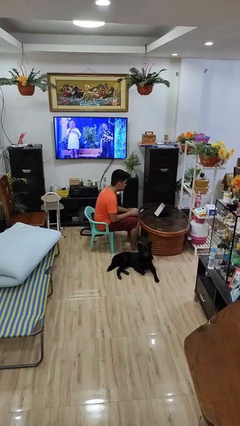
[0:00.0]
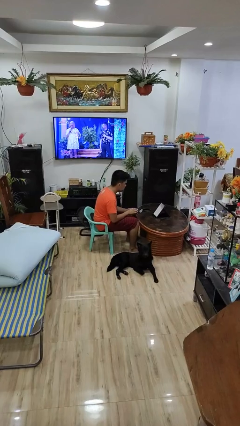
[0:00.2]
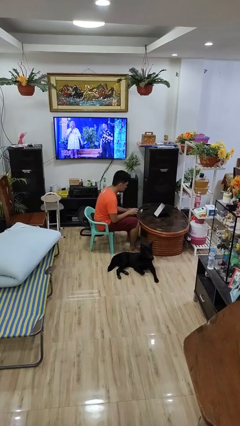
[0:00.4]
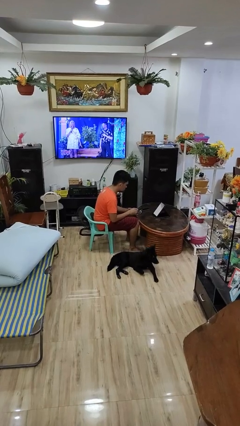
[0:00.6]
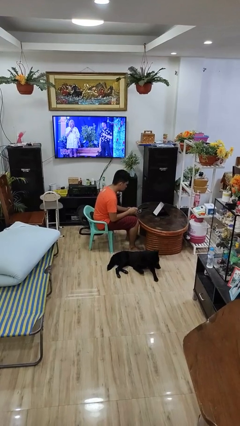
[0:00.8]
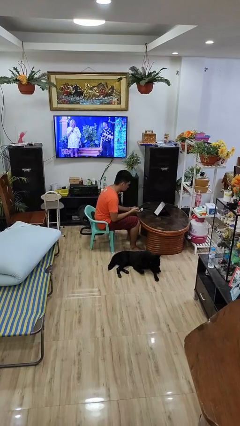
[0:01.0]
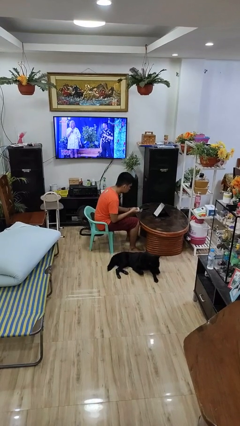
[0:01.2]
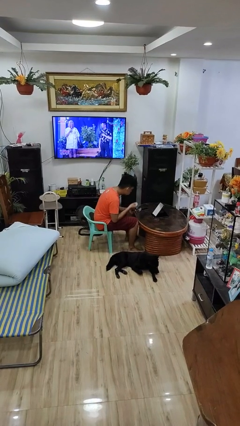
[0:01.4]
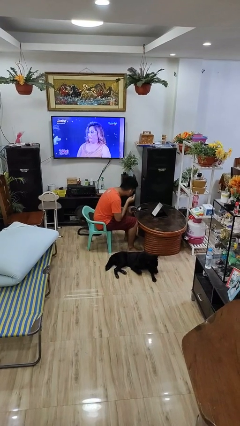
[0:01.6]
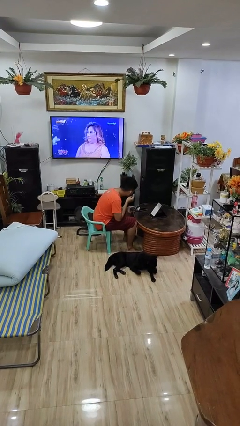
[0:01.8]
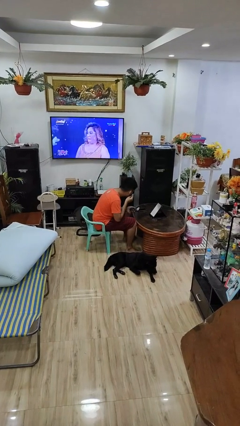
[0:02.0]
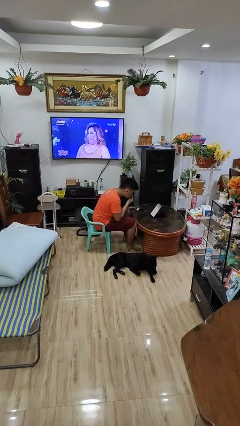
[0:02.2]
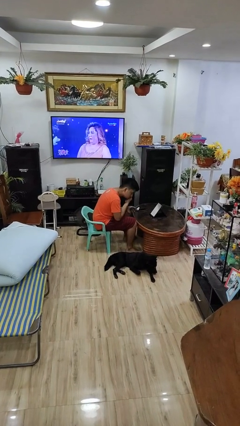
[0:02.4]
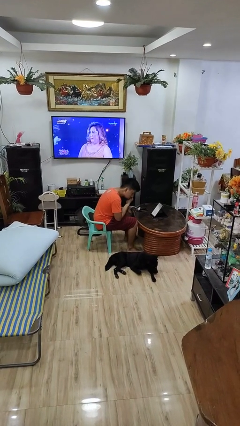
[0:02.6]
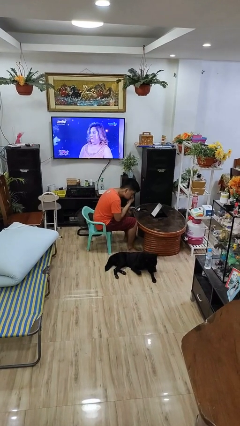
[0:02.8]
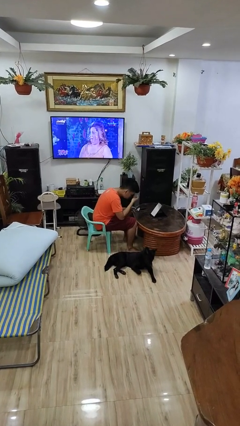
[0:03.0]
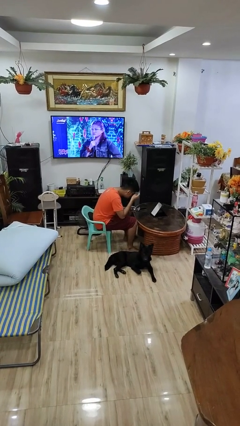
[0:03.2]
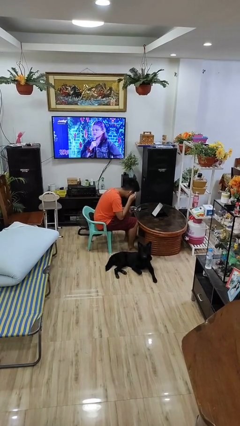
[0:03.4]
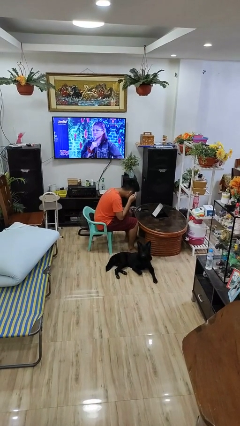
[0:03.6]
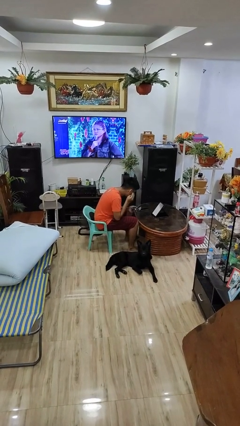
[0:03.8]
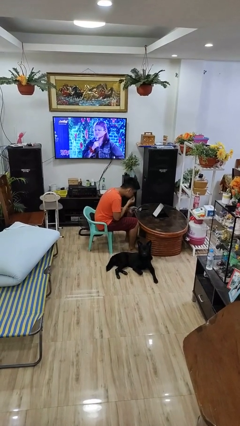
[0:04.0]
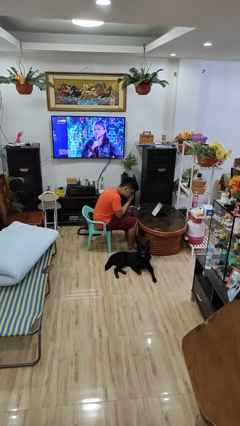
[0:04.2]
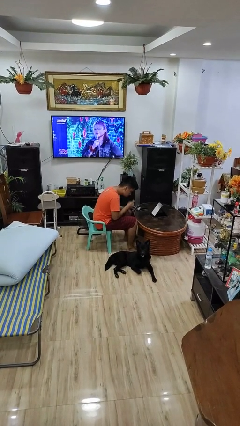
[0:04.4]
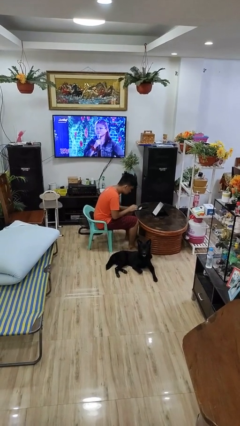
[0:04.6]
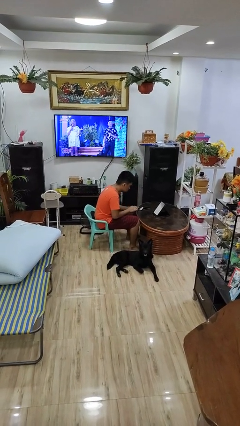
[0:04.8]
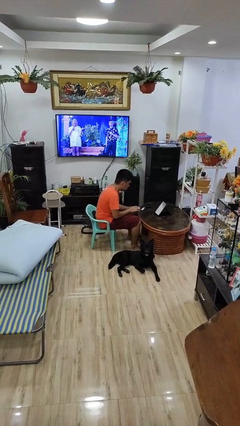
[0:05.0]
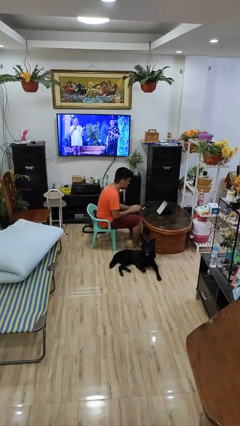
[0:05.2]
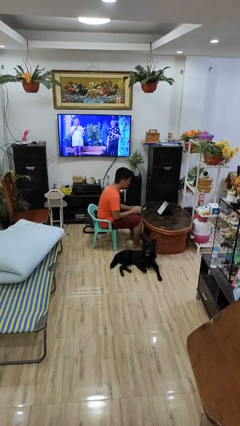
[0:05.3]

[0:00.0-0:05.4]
person applies foundation makeup

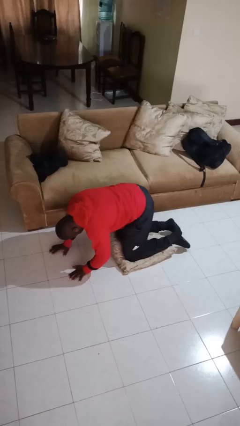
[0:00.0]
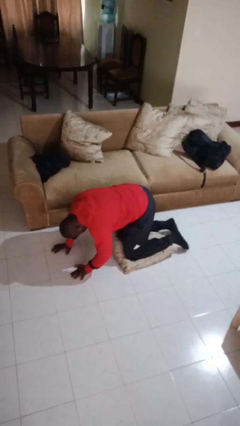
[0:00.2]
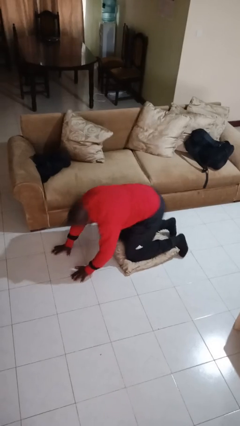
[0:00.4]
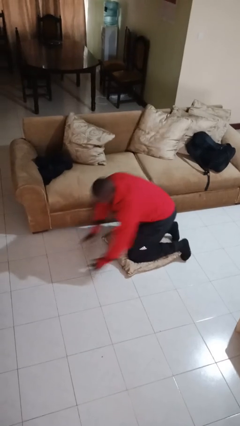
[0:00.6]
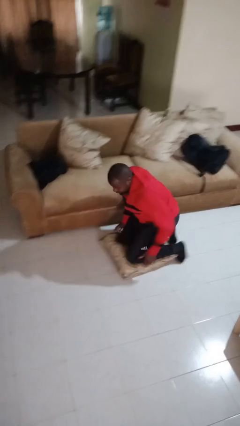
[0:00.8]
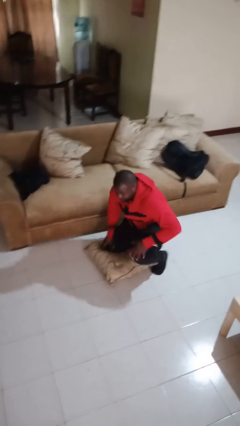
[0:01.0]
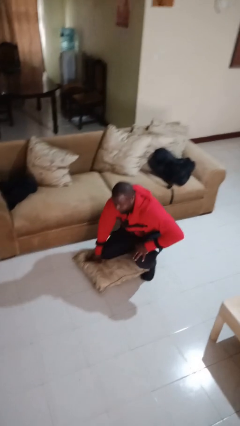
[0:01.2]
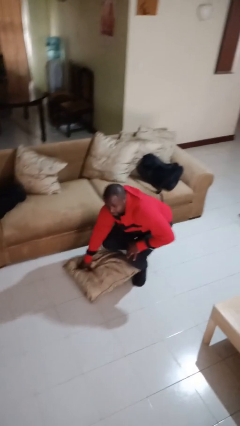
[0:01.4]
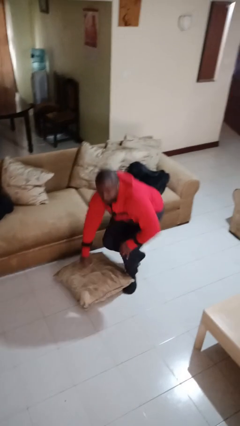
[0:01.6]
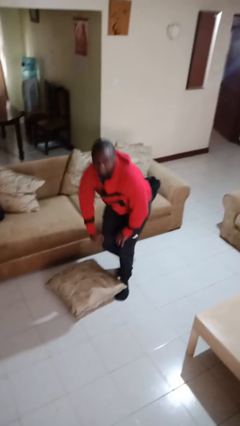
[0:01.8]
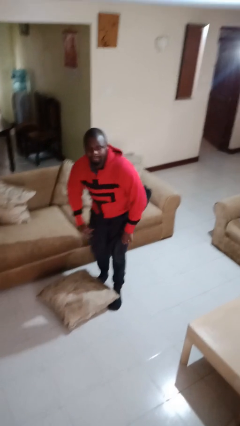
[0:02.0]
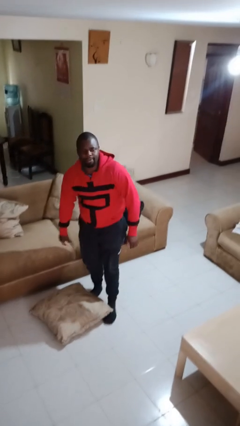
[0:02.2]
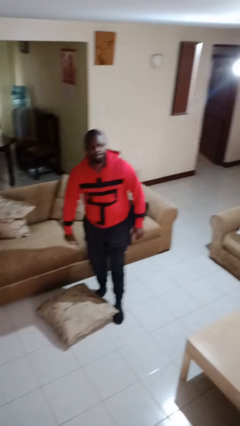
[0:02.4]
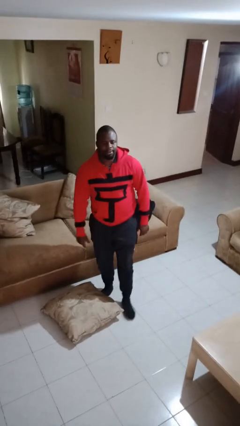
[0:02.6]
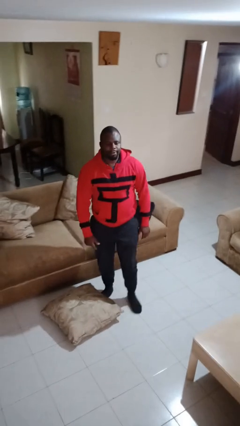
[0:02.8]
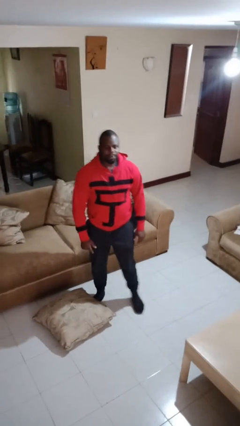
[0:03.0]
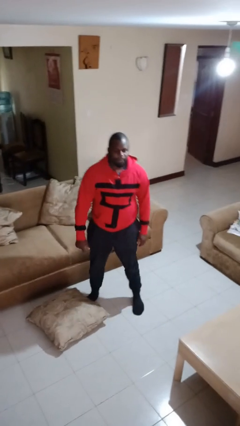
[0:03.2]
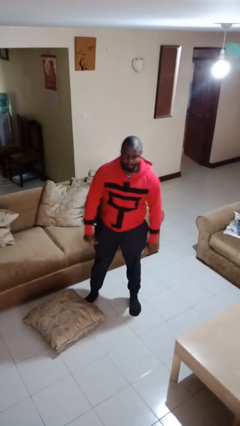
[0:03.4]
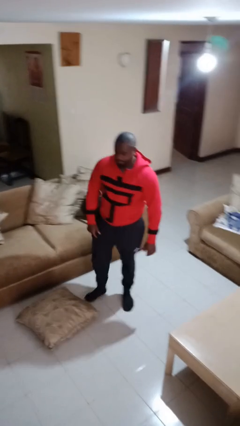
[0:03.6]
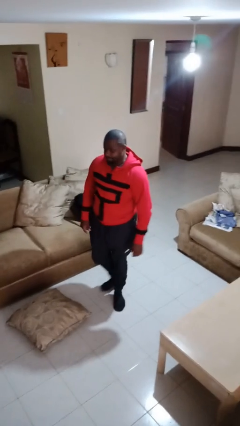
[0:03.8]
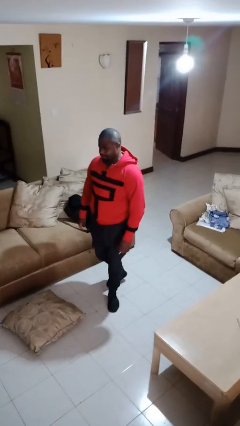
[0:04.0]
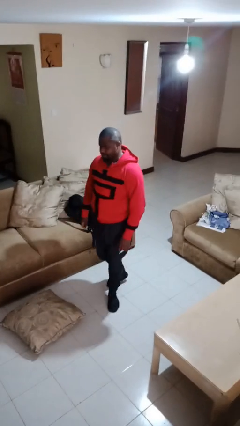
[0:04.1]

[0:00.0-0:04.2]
person stands up from floor

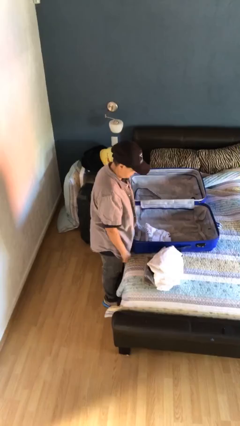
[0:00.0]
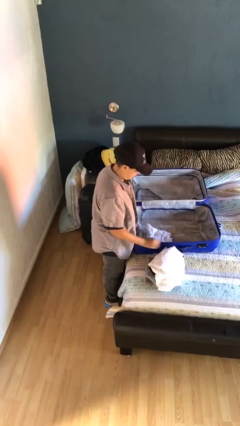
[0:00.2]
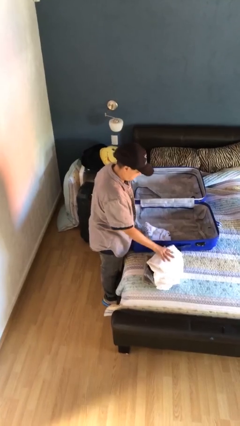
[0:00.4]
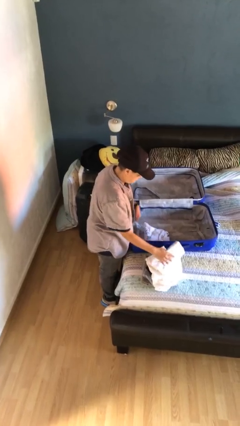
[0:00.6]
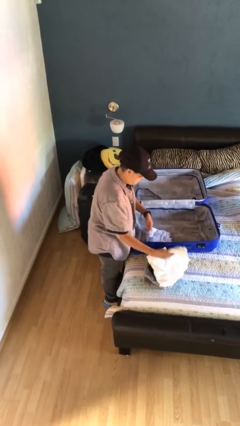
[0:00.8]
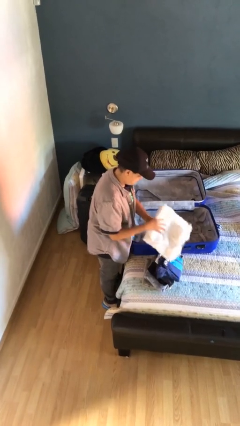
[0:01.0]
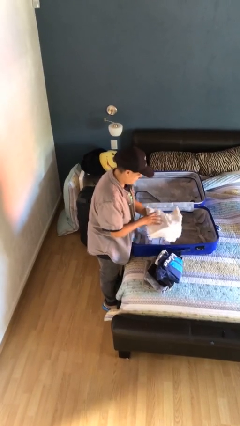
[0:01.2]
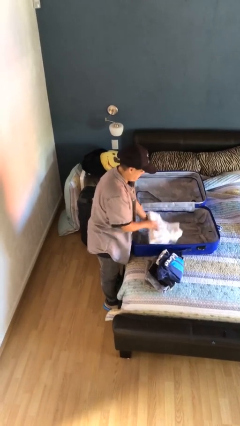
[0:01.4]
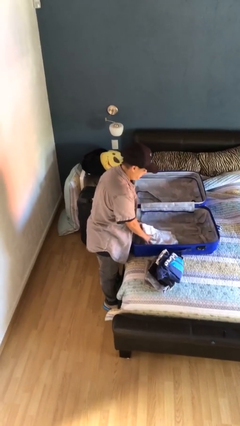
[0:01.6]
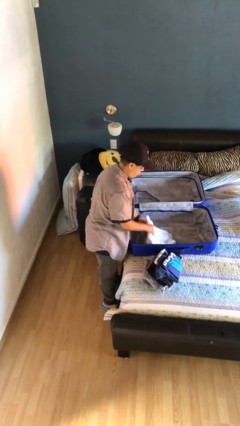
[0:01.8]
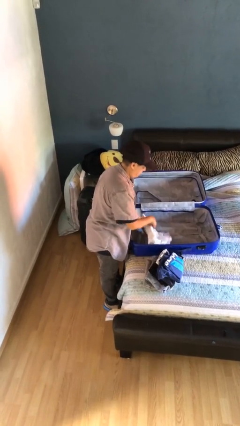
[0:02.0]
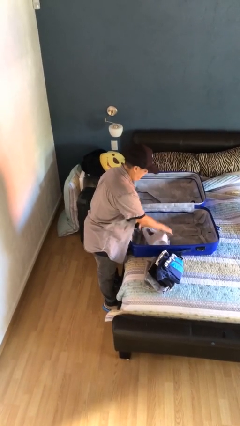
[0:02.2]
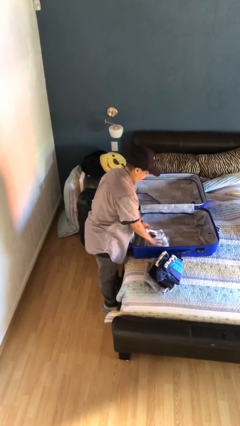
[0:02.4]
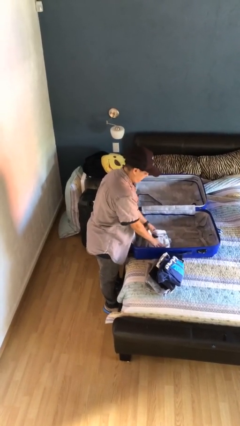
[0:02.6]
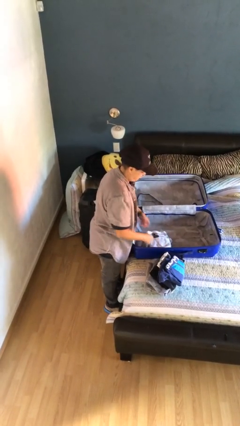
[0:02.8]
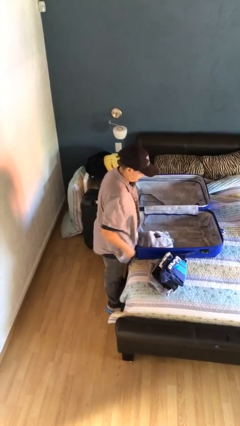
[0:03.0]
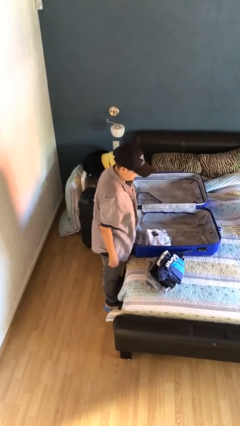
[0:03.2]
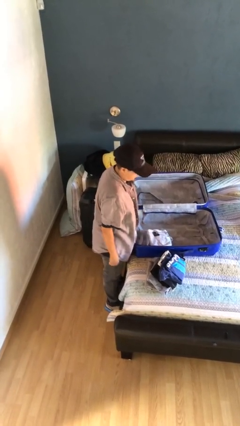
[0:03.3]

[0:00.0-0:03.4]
person loads clothes into suitcase

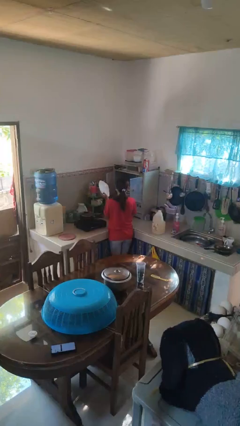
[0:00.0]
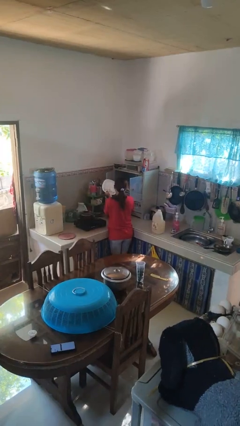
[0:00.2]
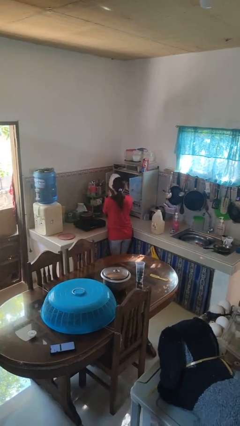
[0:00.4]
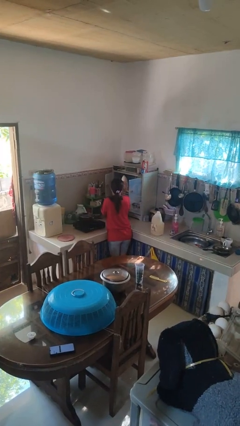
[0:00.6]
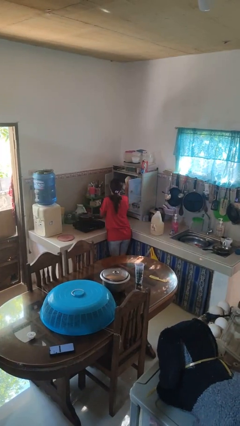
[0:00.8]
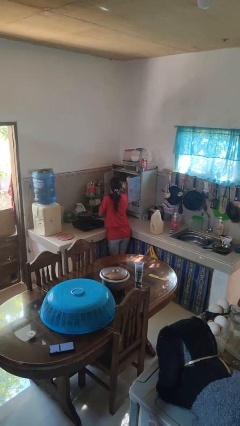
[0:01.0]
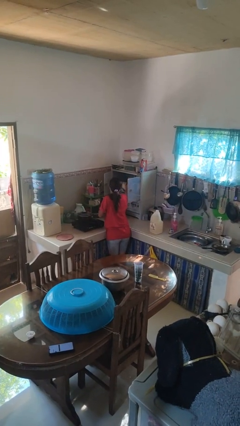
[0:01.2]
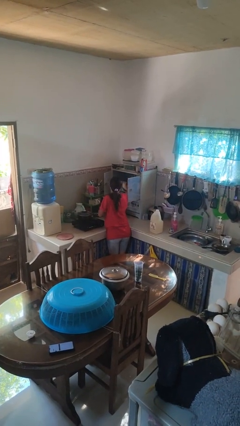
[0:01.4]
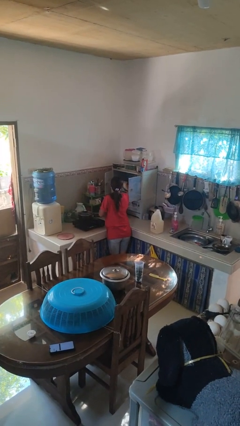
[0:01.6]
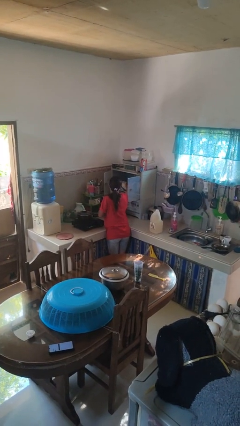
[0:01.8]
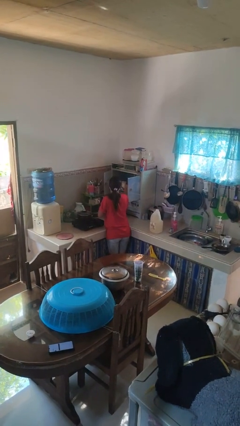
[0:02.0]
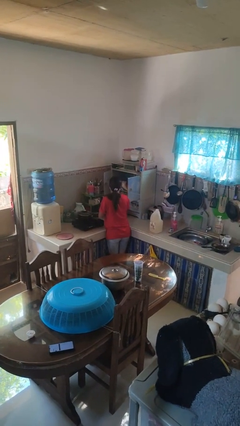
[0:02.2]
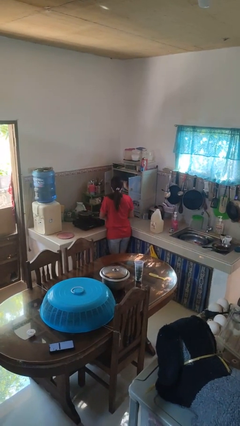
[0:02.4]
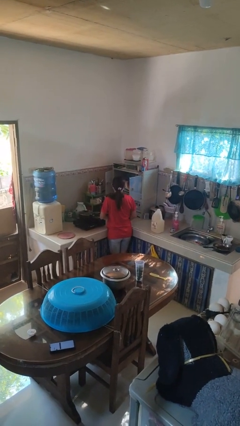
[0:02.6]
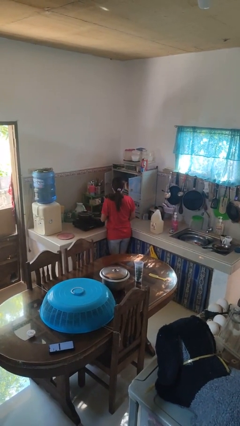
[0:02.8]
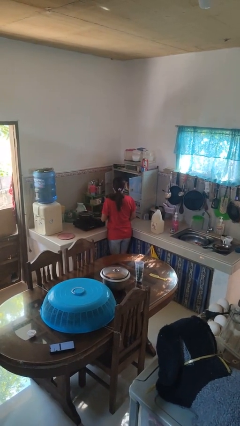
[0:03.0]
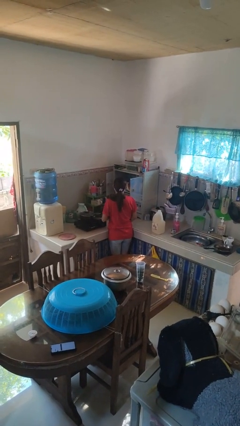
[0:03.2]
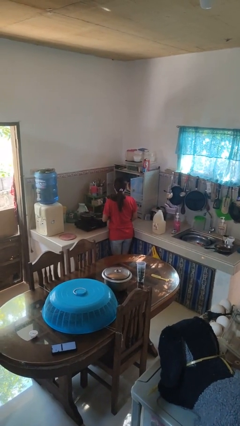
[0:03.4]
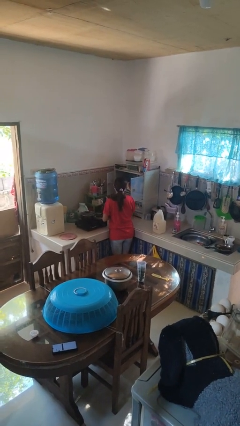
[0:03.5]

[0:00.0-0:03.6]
person puts object in cabinet

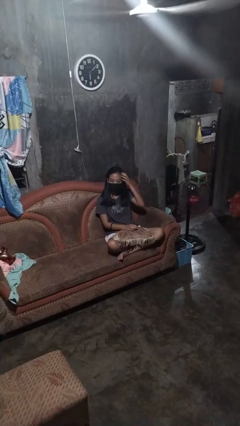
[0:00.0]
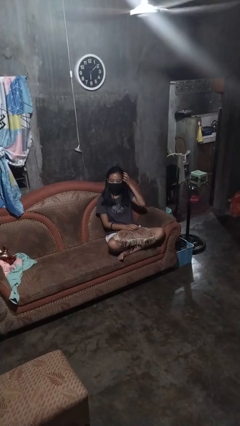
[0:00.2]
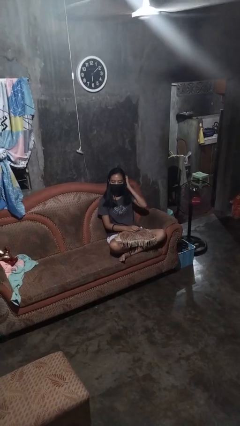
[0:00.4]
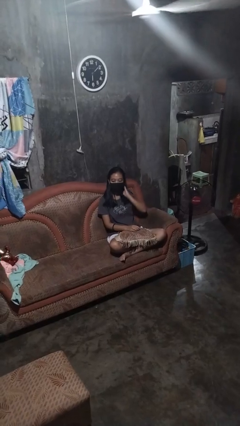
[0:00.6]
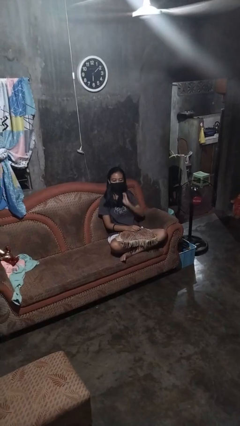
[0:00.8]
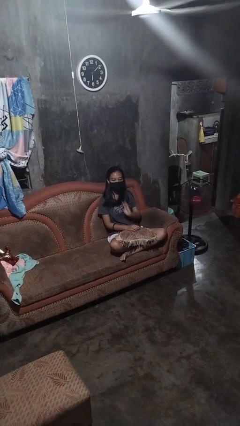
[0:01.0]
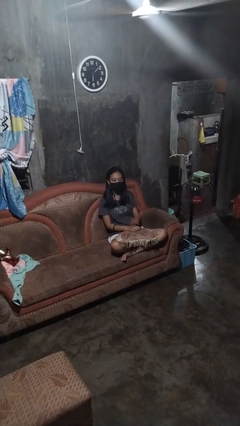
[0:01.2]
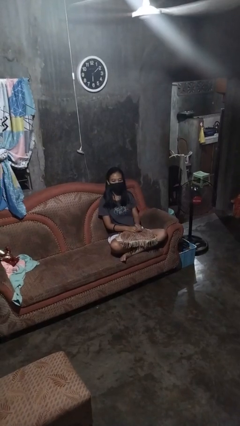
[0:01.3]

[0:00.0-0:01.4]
person strokes hair
